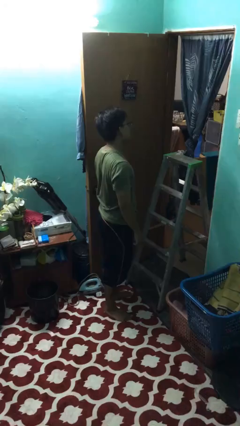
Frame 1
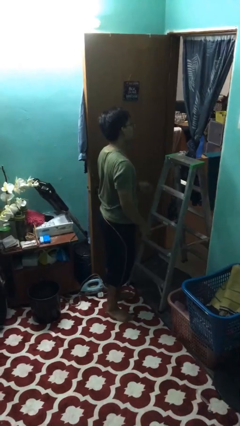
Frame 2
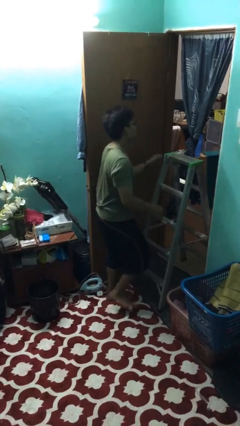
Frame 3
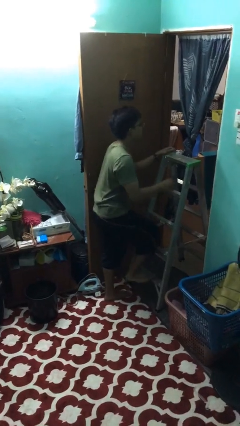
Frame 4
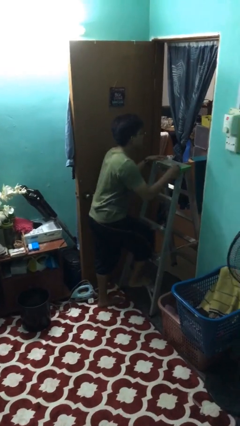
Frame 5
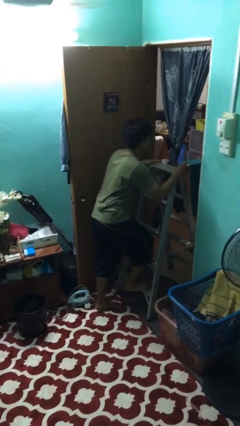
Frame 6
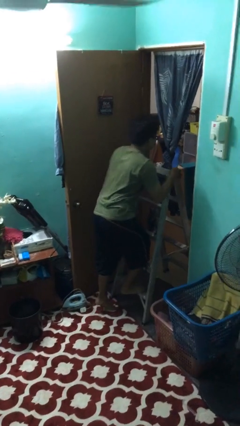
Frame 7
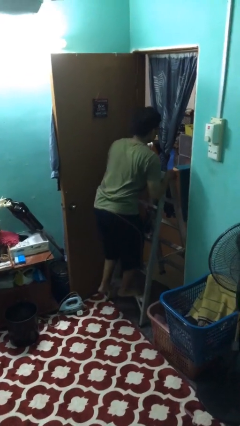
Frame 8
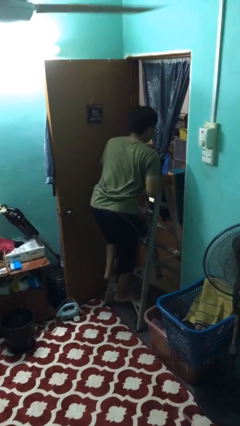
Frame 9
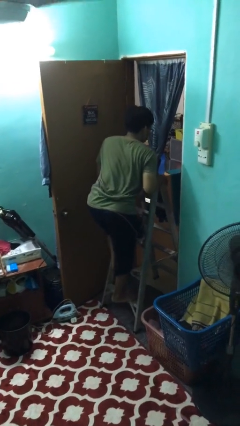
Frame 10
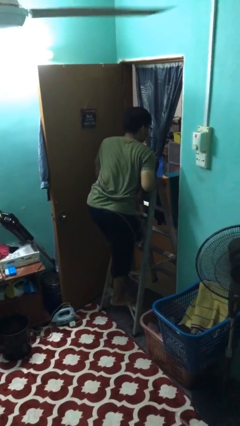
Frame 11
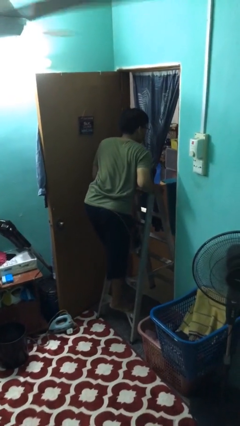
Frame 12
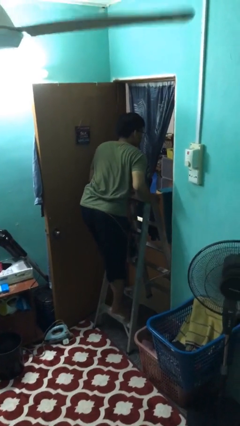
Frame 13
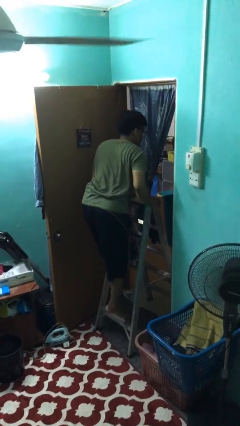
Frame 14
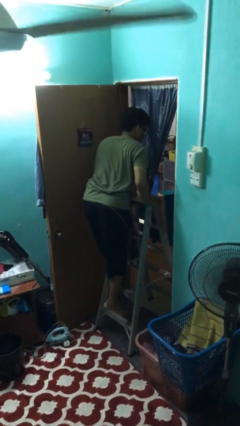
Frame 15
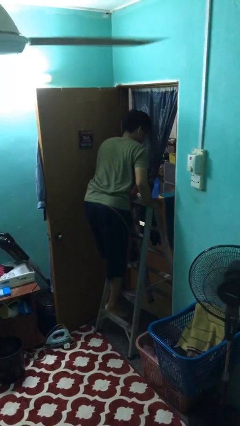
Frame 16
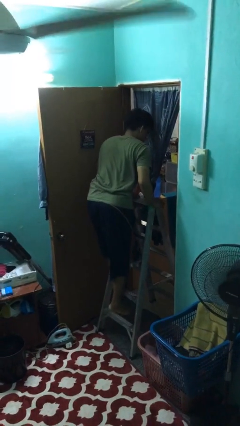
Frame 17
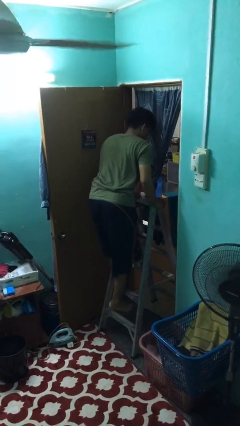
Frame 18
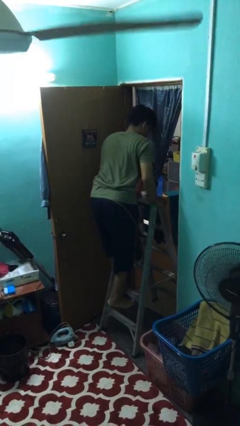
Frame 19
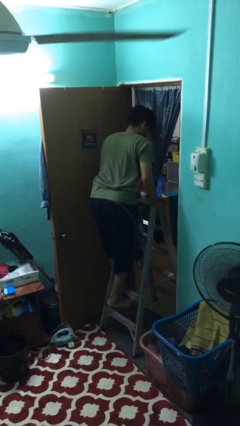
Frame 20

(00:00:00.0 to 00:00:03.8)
person climbs up ladder

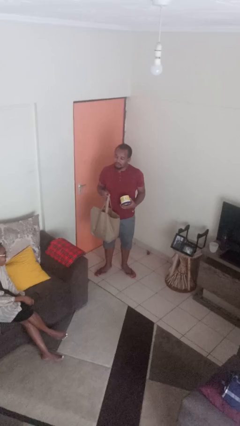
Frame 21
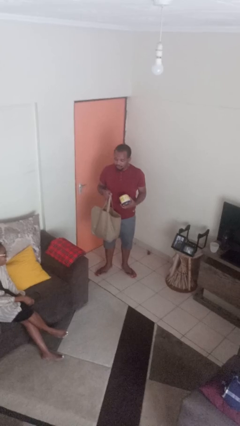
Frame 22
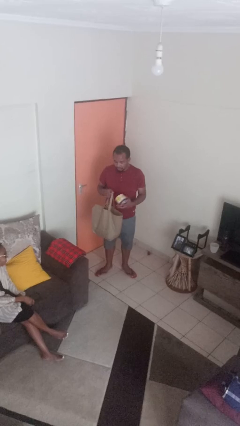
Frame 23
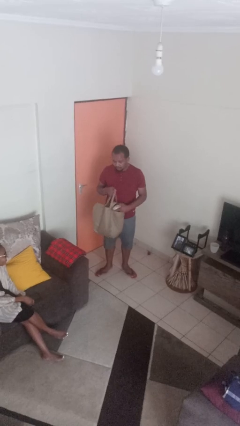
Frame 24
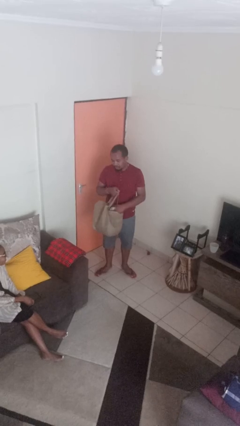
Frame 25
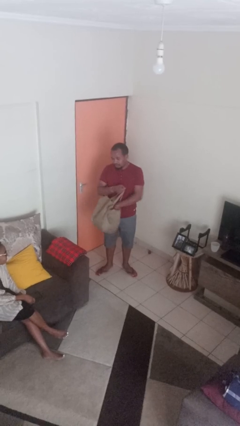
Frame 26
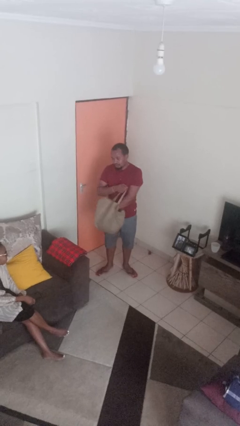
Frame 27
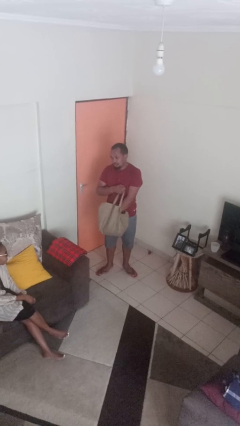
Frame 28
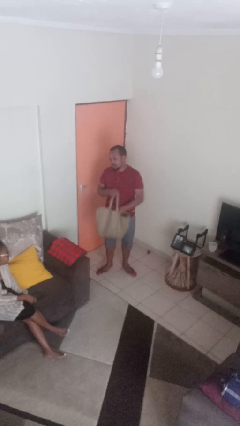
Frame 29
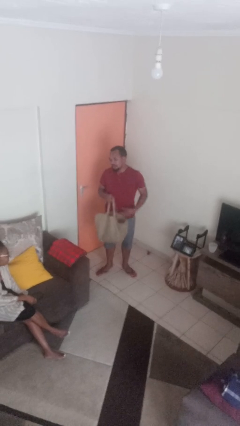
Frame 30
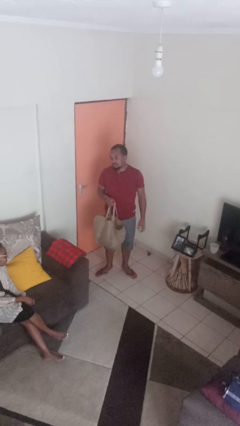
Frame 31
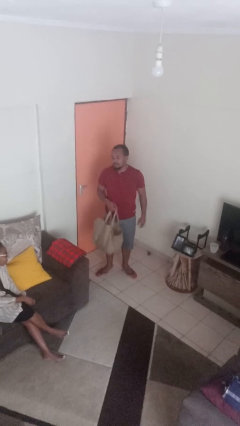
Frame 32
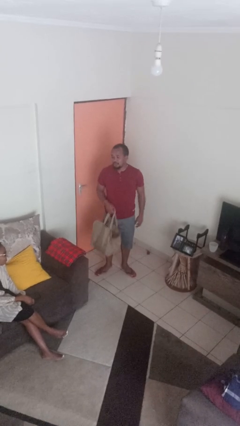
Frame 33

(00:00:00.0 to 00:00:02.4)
person puts object into bag

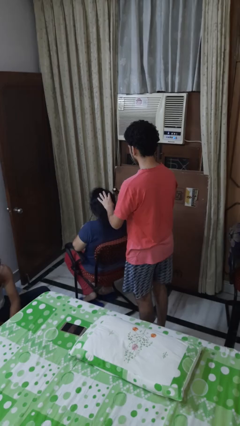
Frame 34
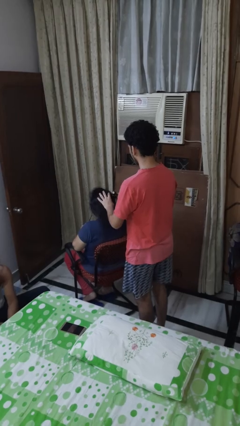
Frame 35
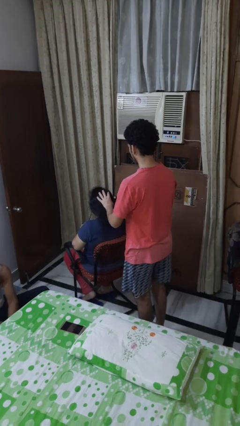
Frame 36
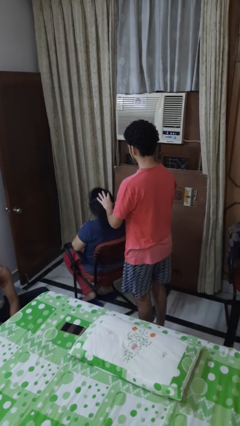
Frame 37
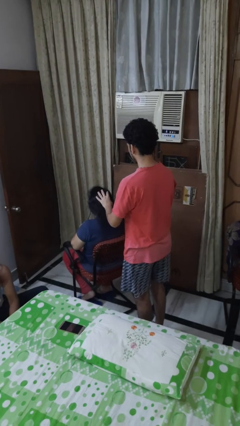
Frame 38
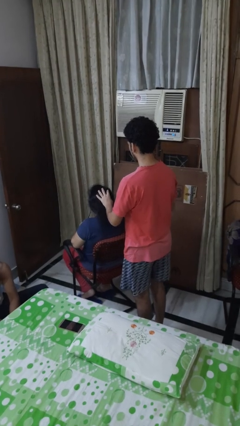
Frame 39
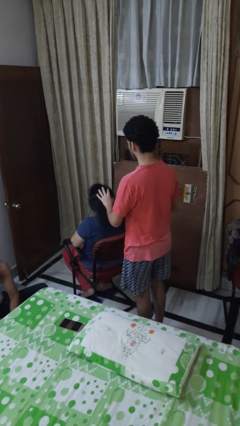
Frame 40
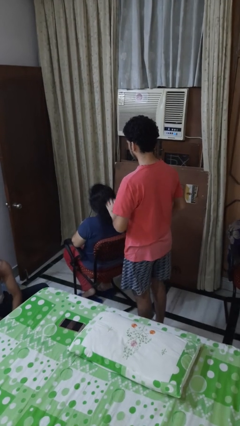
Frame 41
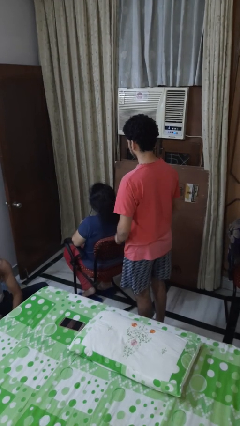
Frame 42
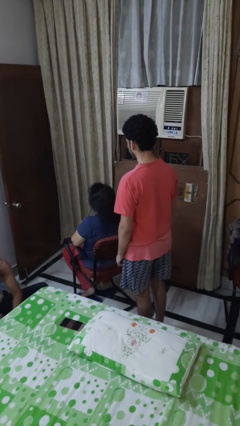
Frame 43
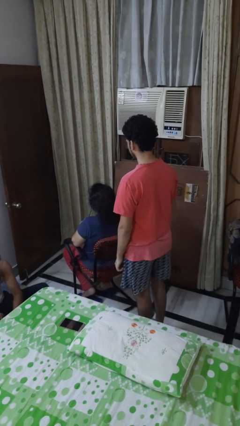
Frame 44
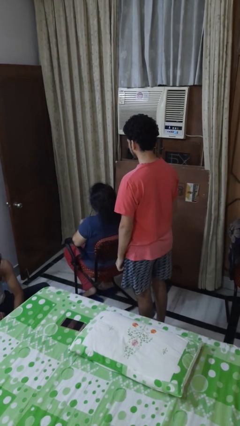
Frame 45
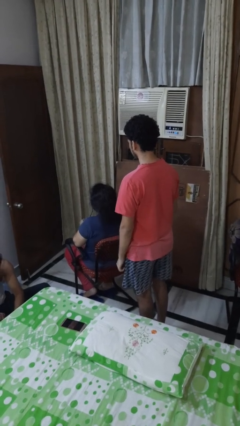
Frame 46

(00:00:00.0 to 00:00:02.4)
person brushes hair of person

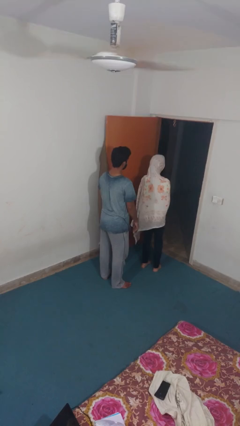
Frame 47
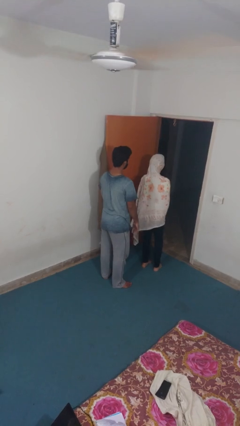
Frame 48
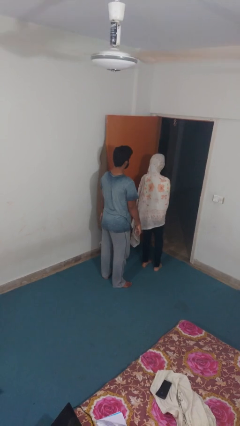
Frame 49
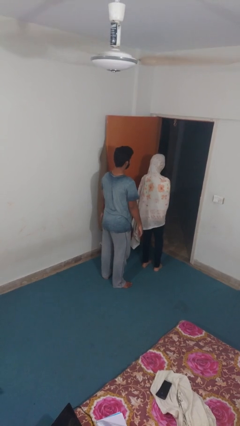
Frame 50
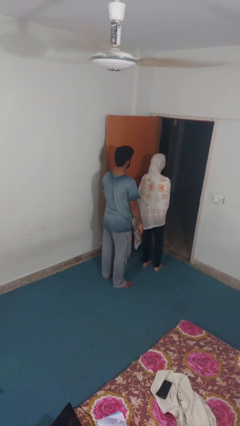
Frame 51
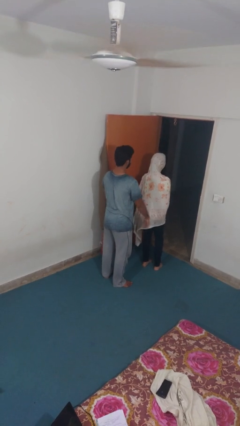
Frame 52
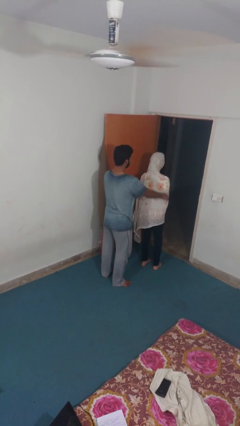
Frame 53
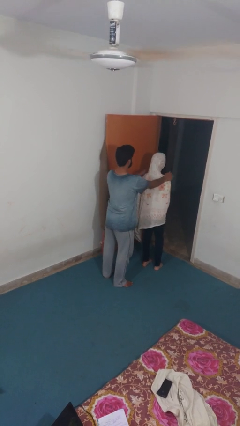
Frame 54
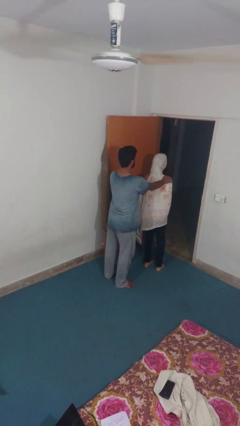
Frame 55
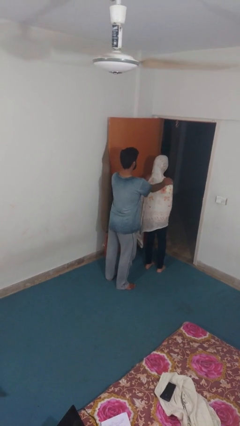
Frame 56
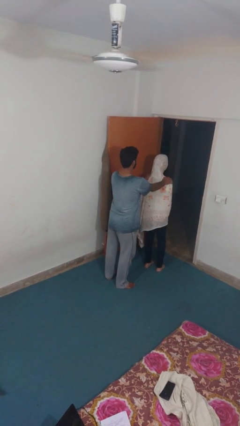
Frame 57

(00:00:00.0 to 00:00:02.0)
person grabs person by shoulder

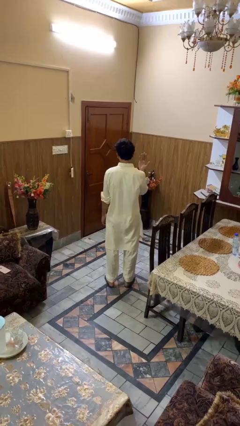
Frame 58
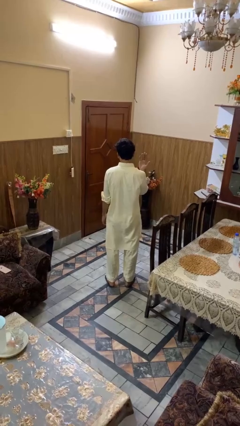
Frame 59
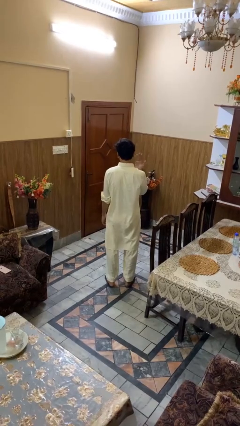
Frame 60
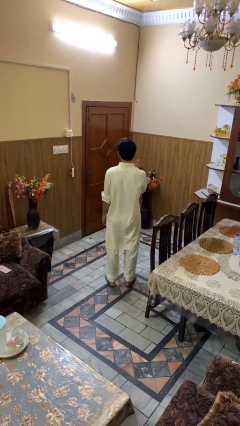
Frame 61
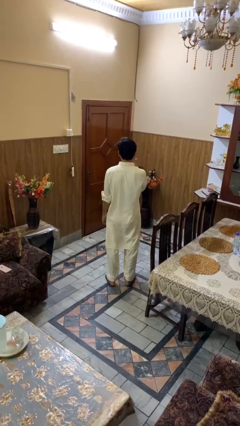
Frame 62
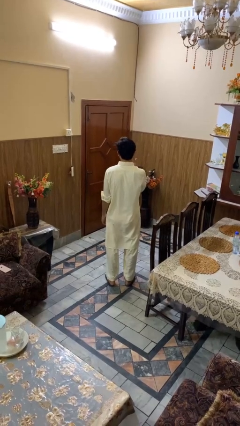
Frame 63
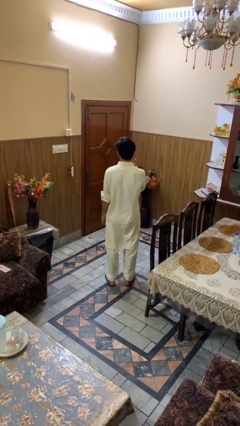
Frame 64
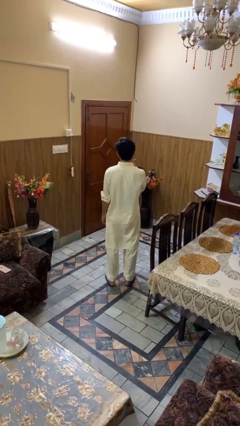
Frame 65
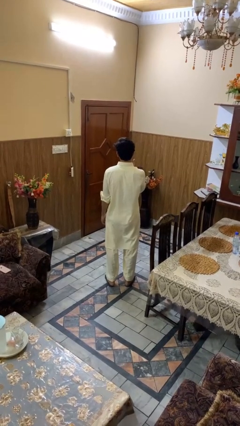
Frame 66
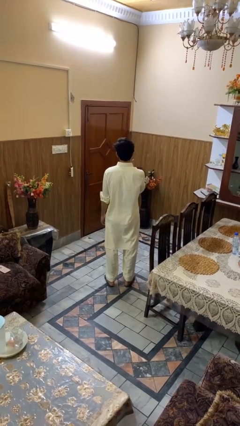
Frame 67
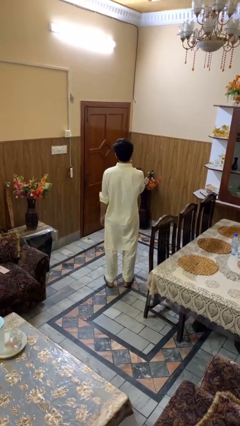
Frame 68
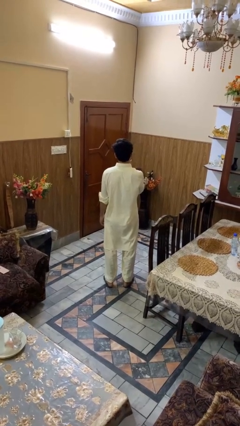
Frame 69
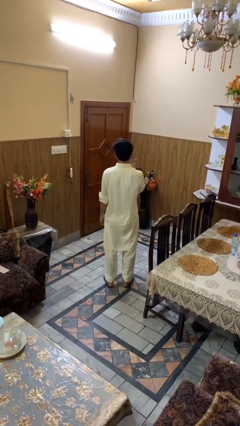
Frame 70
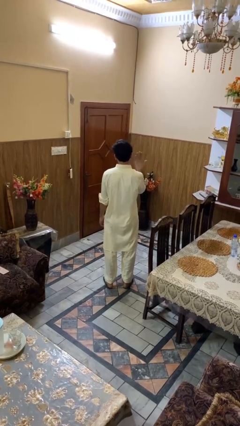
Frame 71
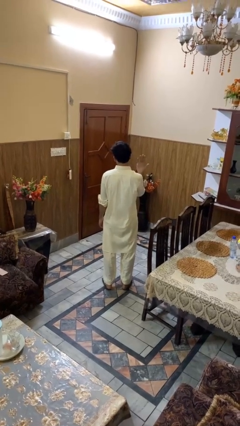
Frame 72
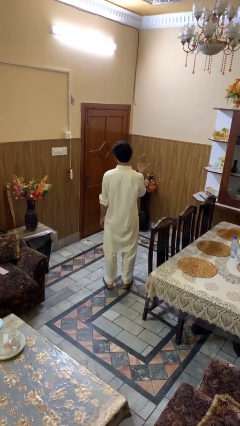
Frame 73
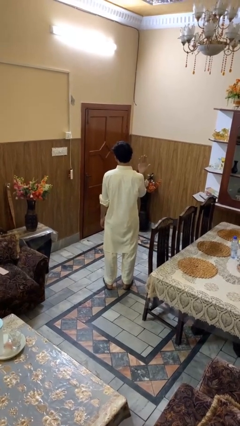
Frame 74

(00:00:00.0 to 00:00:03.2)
person licks fingers

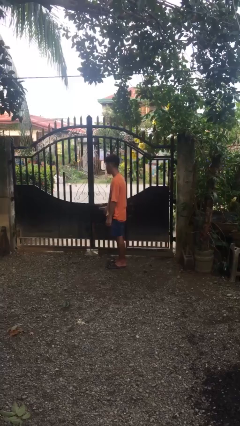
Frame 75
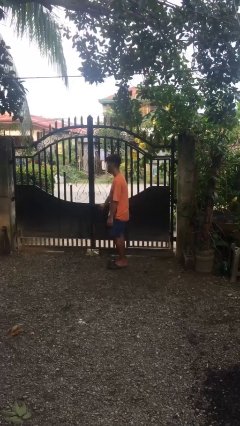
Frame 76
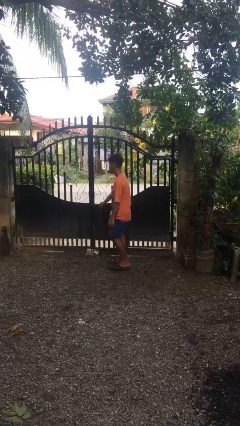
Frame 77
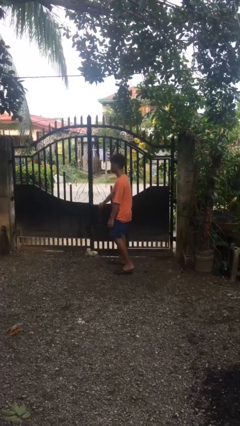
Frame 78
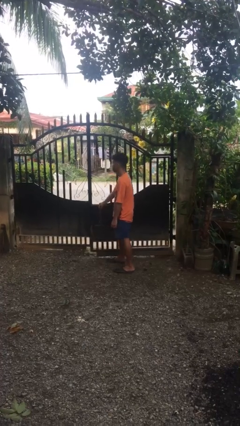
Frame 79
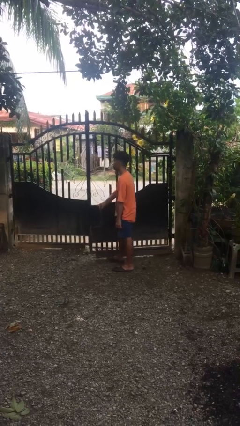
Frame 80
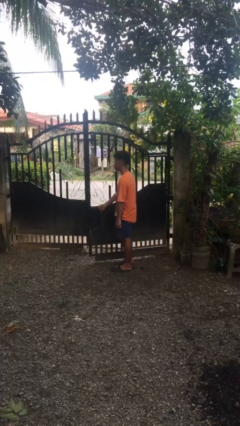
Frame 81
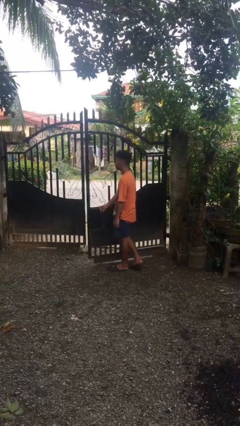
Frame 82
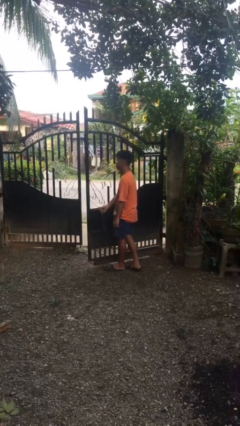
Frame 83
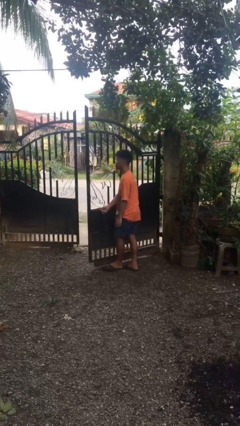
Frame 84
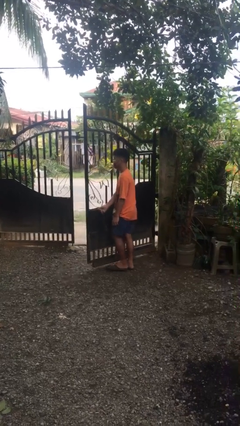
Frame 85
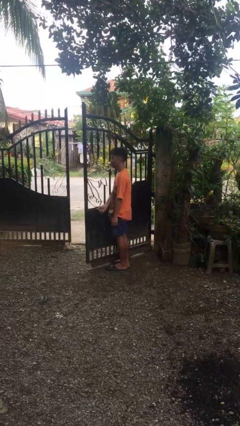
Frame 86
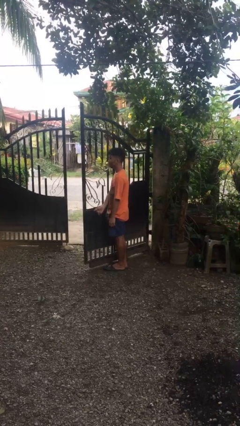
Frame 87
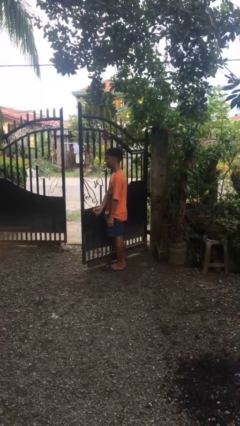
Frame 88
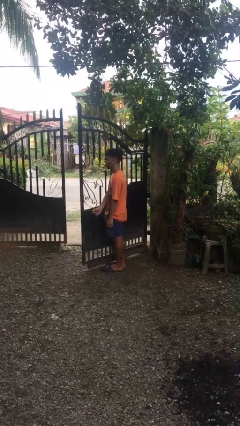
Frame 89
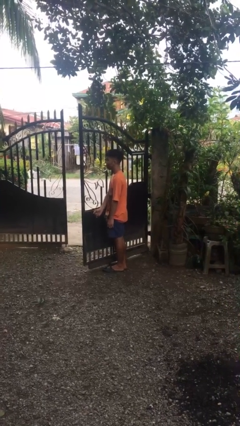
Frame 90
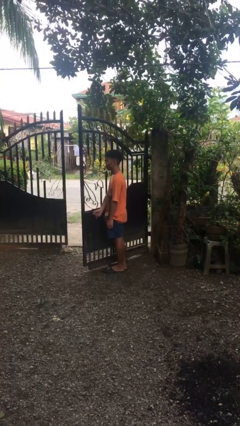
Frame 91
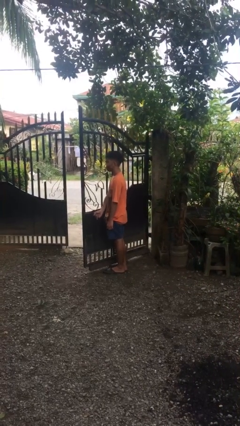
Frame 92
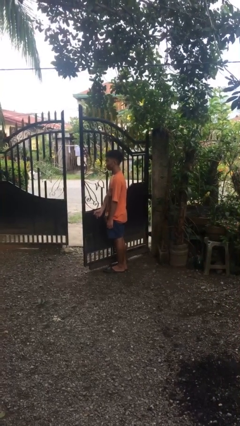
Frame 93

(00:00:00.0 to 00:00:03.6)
person opens gate

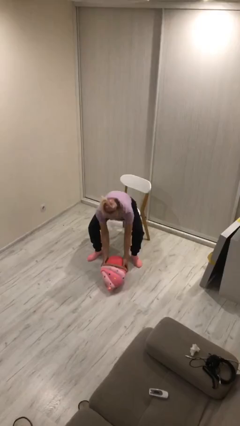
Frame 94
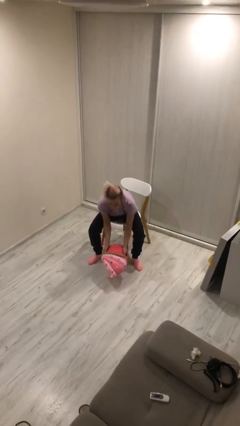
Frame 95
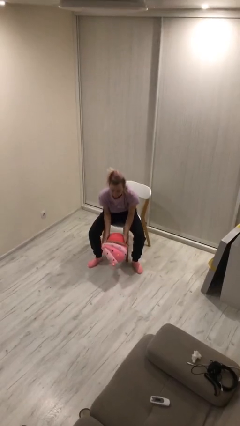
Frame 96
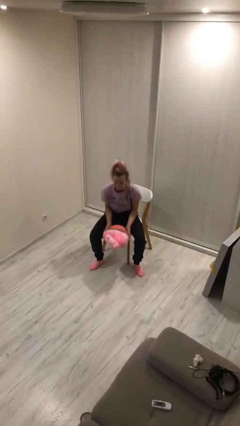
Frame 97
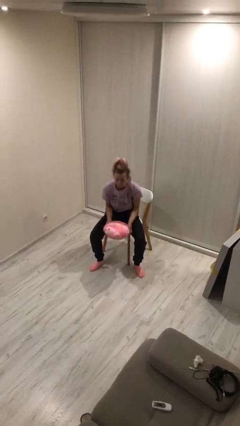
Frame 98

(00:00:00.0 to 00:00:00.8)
person picks up object from floor
